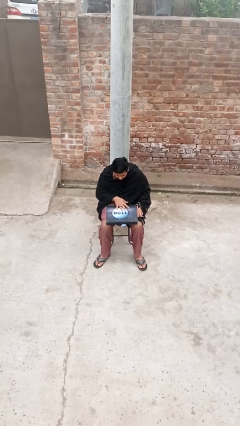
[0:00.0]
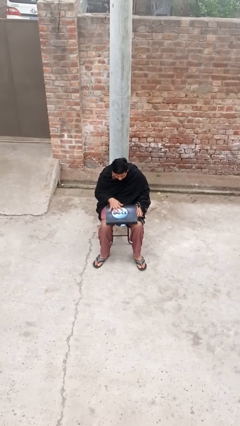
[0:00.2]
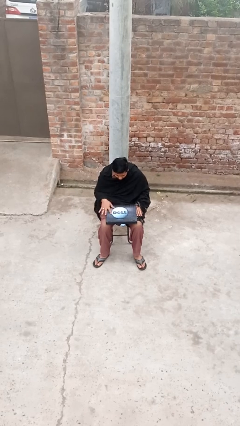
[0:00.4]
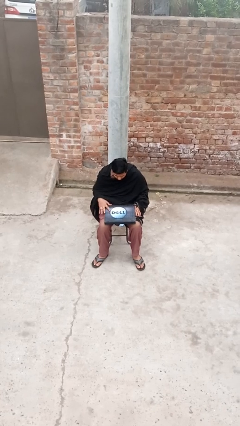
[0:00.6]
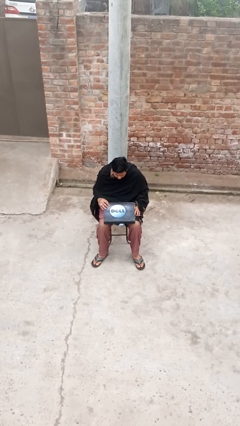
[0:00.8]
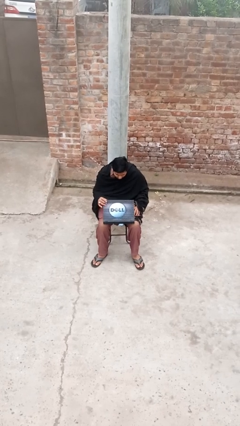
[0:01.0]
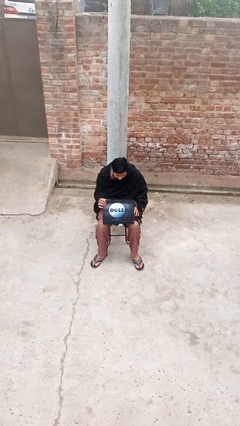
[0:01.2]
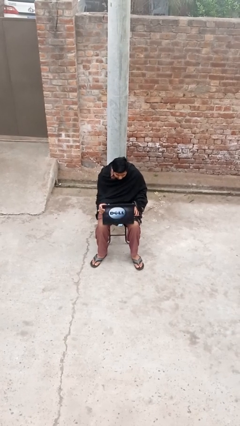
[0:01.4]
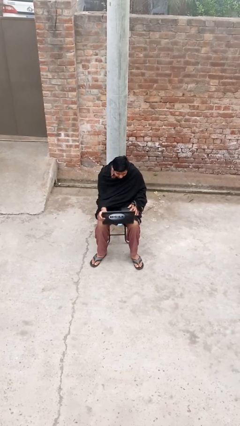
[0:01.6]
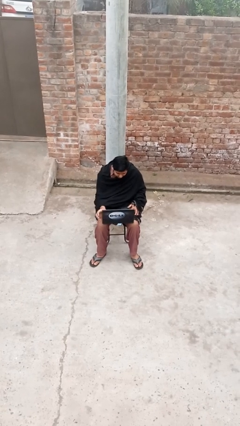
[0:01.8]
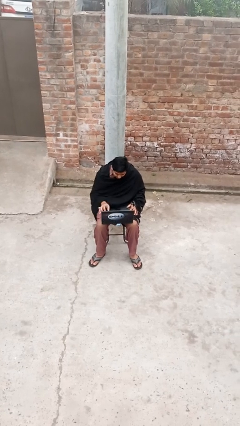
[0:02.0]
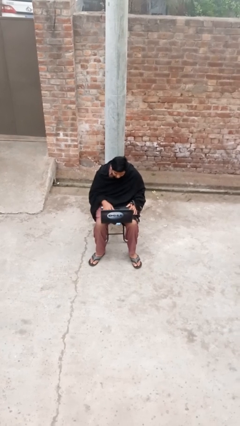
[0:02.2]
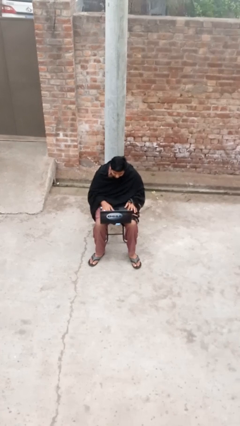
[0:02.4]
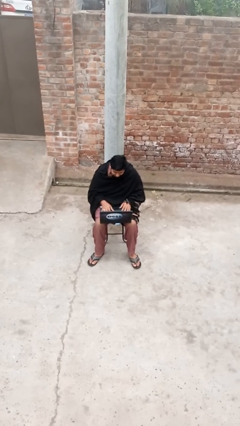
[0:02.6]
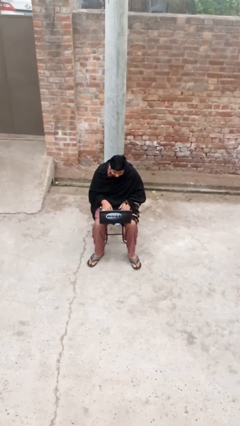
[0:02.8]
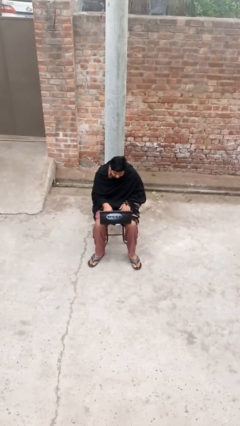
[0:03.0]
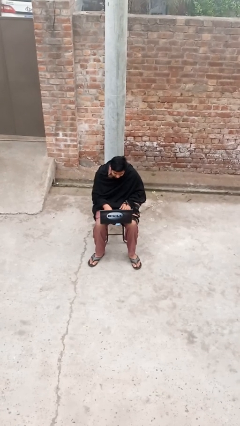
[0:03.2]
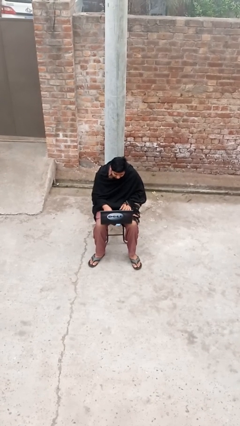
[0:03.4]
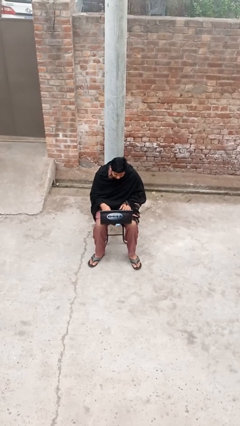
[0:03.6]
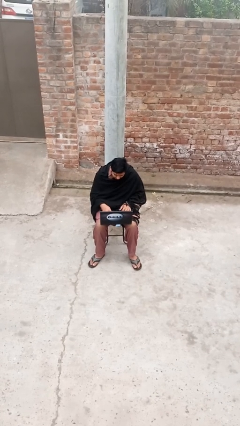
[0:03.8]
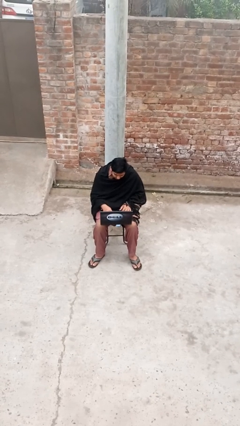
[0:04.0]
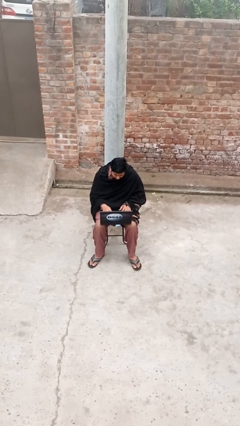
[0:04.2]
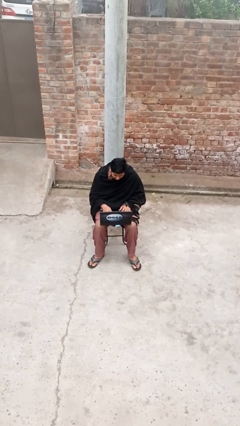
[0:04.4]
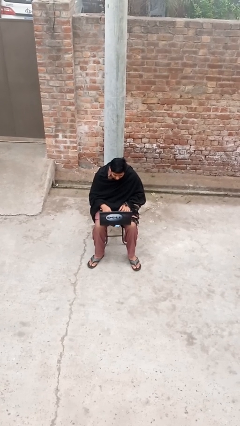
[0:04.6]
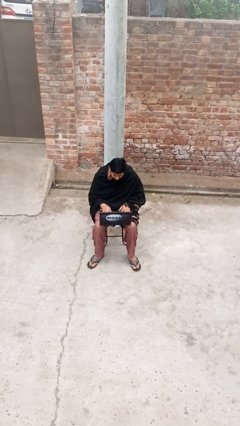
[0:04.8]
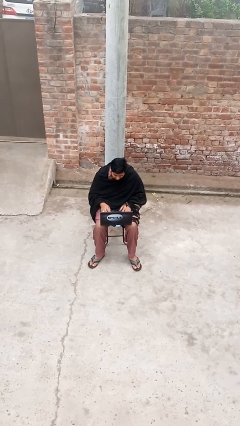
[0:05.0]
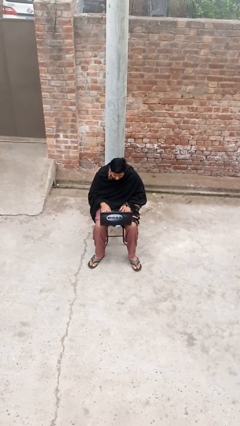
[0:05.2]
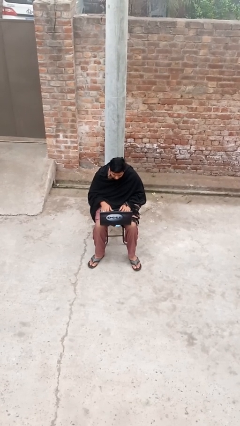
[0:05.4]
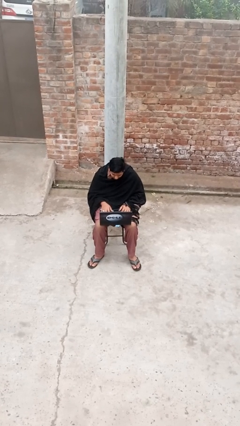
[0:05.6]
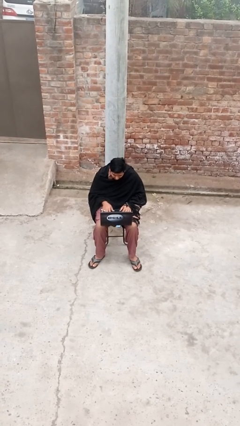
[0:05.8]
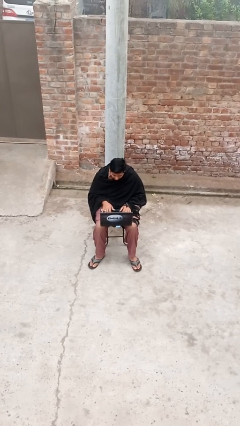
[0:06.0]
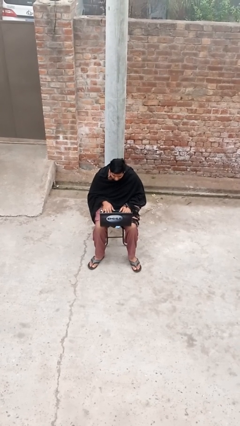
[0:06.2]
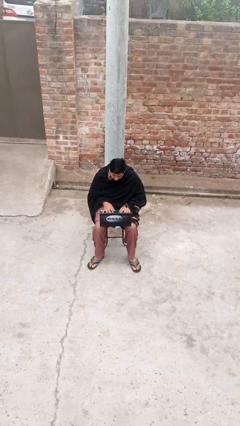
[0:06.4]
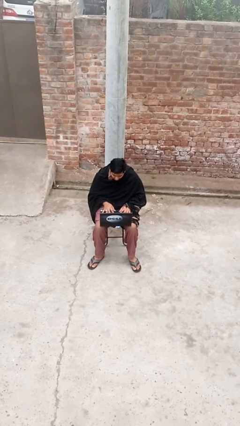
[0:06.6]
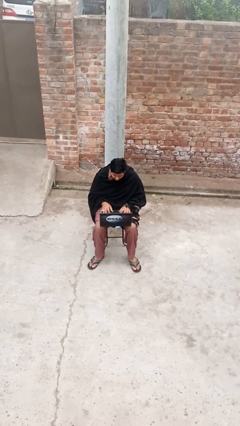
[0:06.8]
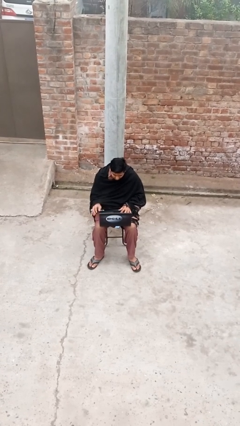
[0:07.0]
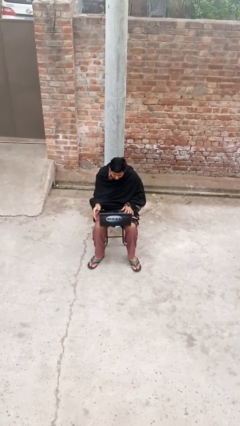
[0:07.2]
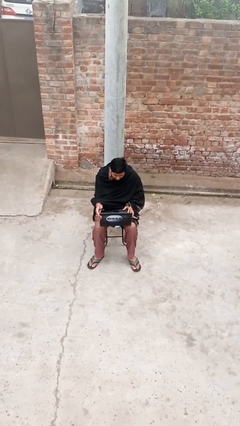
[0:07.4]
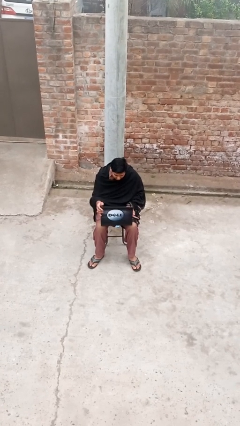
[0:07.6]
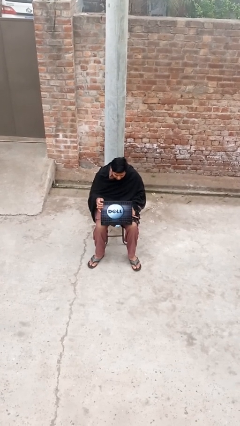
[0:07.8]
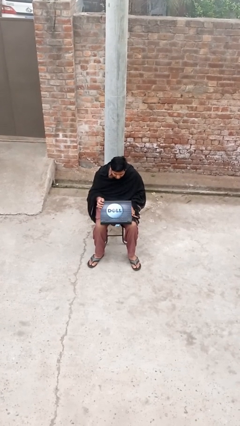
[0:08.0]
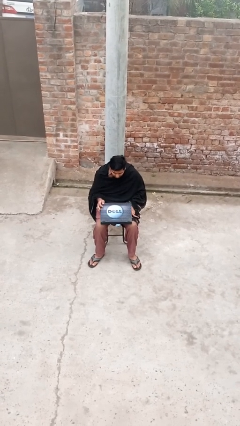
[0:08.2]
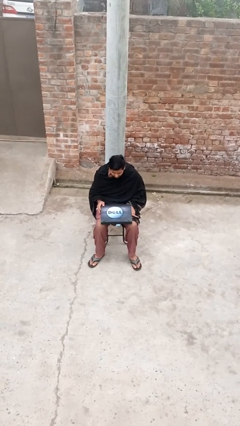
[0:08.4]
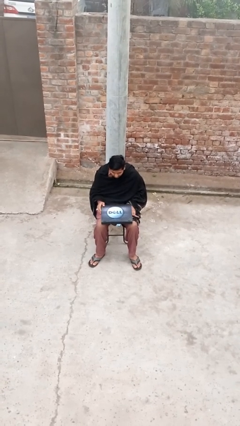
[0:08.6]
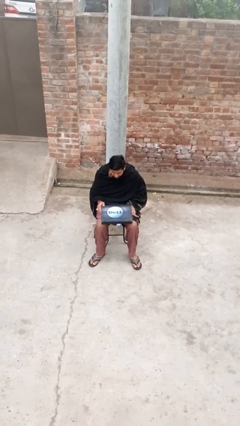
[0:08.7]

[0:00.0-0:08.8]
person interacts with laptop

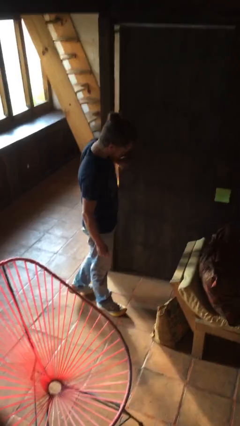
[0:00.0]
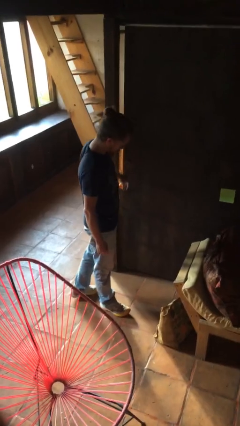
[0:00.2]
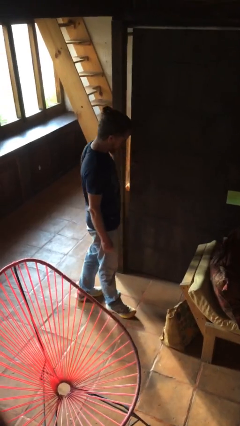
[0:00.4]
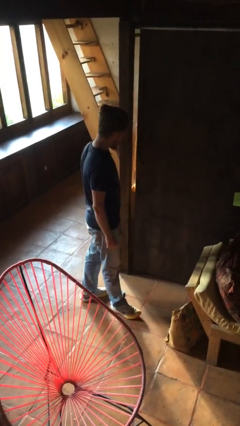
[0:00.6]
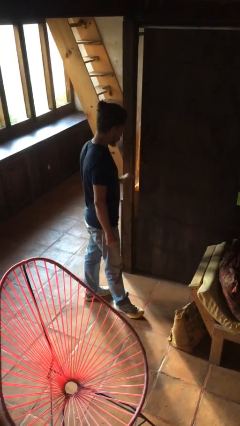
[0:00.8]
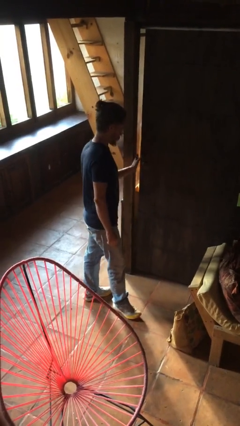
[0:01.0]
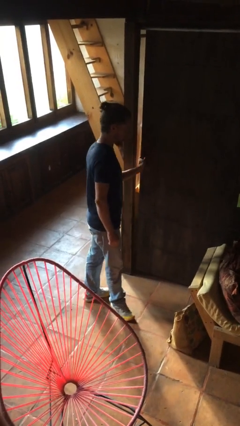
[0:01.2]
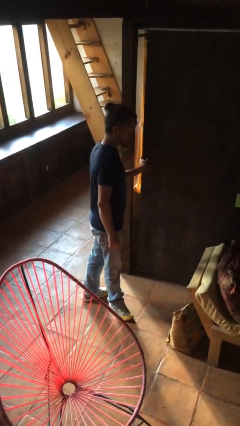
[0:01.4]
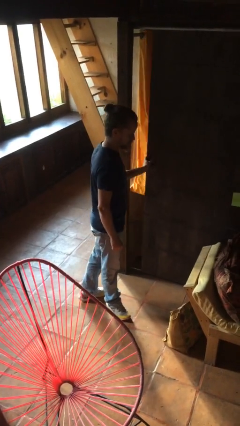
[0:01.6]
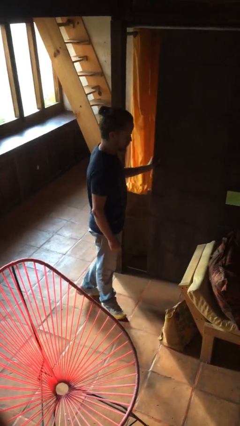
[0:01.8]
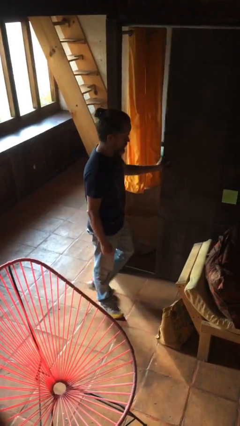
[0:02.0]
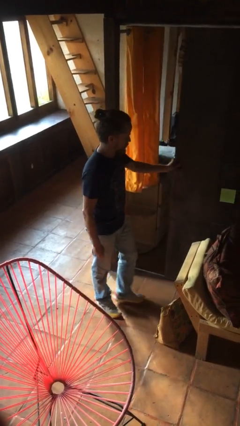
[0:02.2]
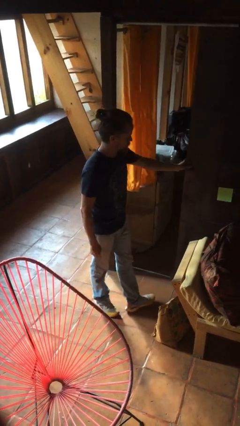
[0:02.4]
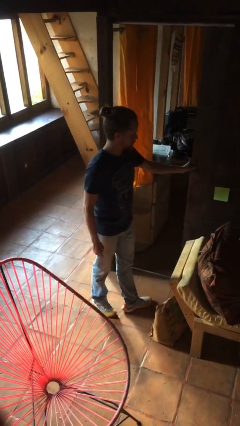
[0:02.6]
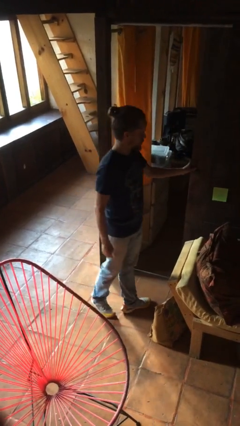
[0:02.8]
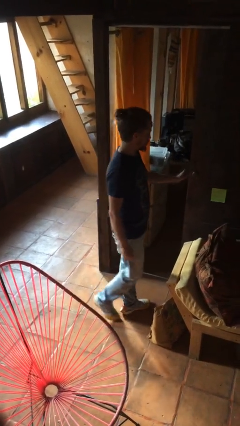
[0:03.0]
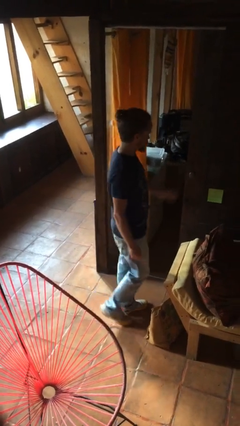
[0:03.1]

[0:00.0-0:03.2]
person opens sliding door

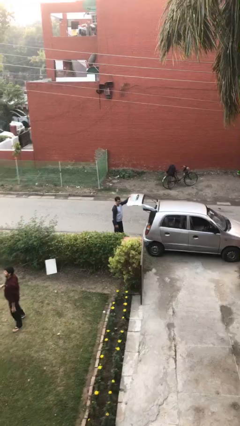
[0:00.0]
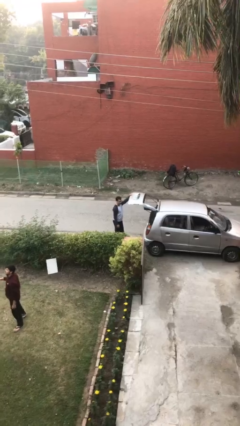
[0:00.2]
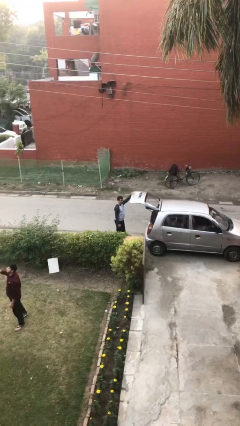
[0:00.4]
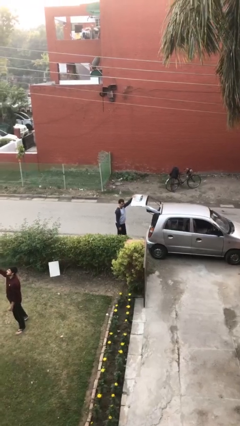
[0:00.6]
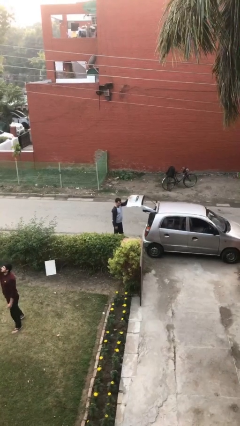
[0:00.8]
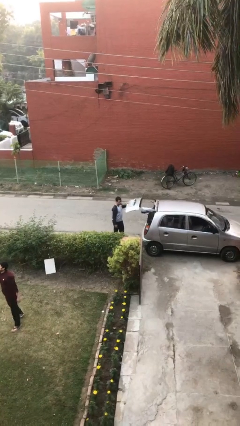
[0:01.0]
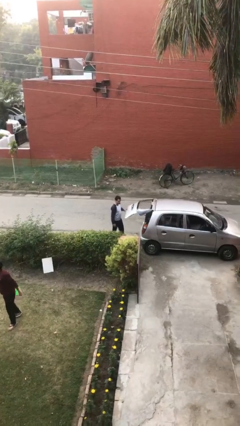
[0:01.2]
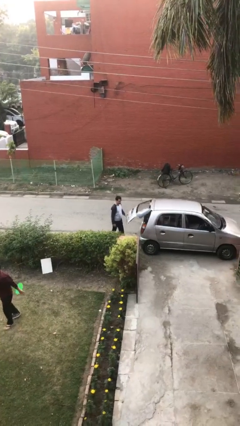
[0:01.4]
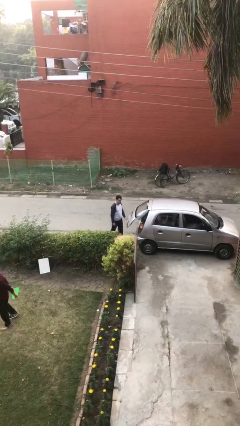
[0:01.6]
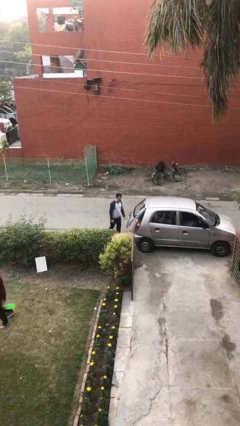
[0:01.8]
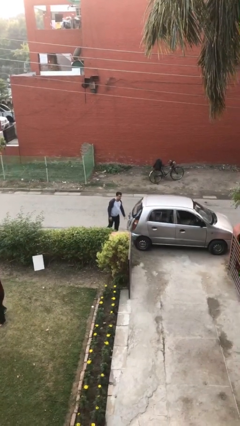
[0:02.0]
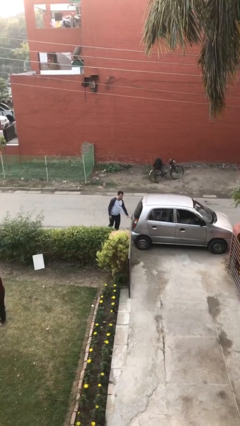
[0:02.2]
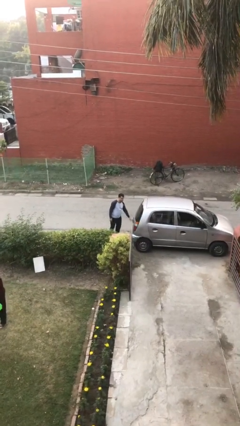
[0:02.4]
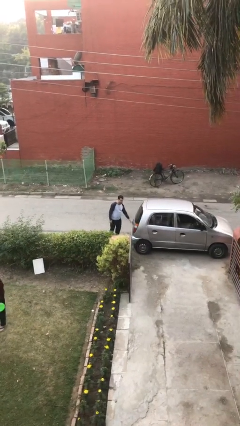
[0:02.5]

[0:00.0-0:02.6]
person closes car trunk

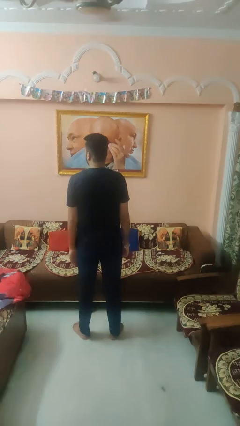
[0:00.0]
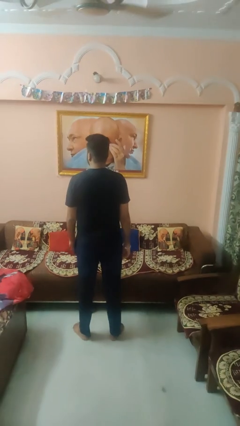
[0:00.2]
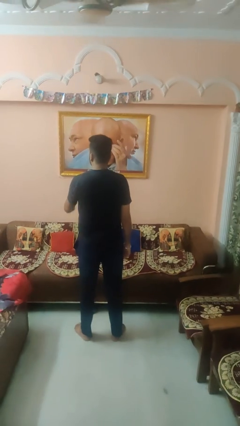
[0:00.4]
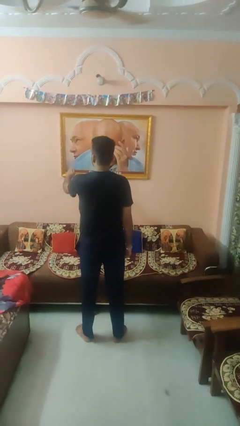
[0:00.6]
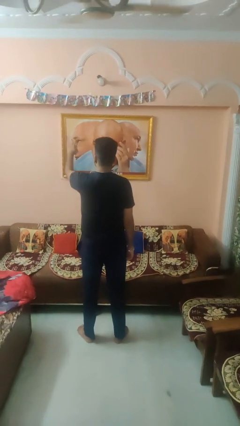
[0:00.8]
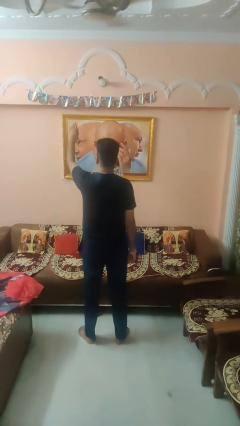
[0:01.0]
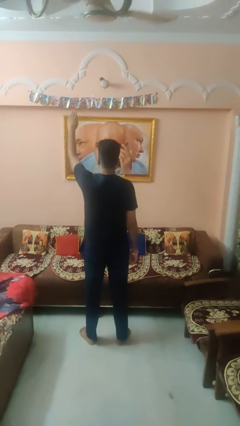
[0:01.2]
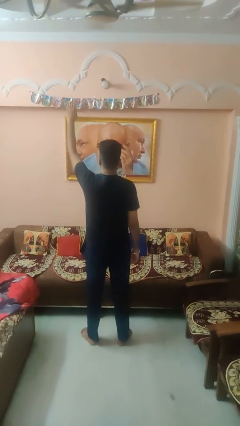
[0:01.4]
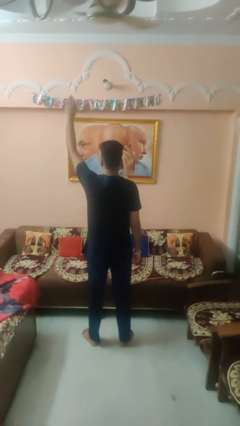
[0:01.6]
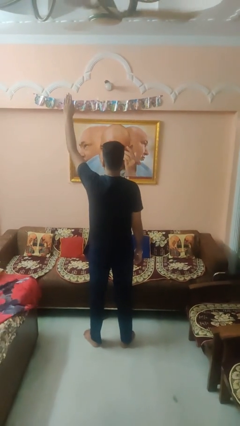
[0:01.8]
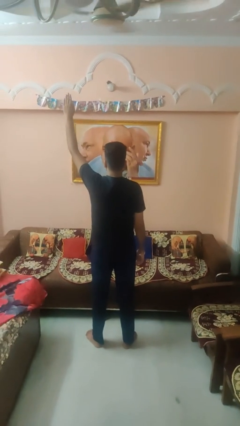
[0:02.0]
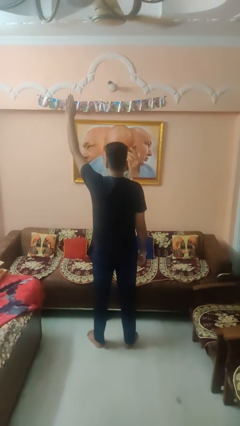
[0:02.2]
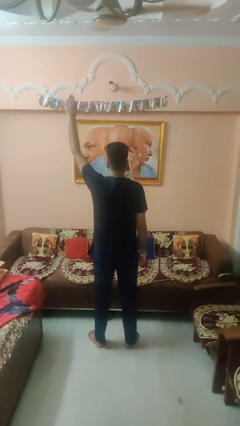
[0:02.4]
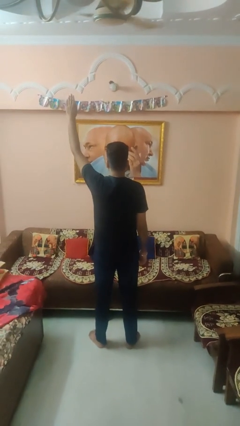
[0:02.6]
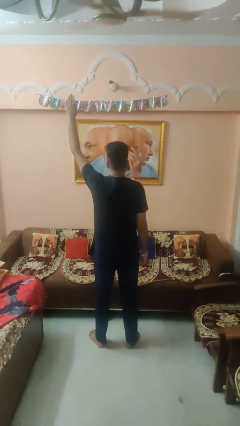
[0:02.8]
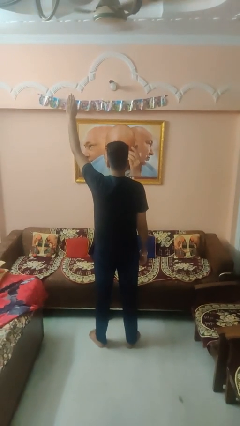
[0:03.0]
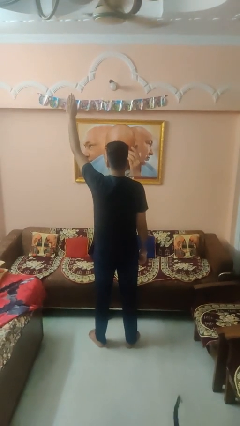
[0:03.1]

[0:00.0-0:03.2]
person gestures raise hand

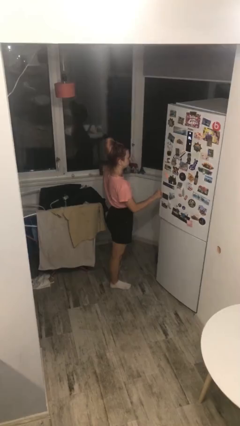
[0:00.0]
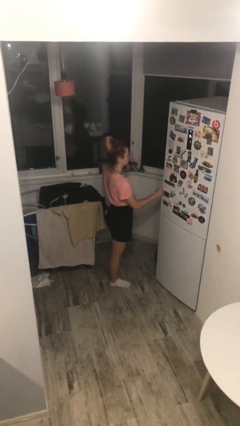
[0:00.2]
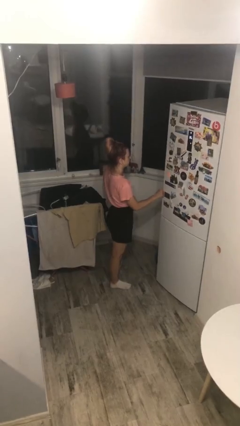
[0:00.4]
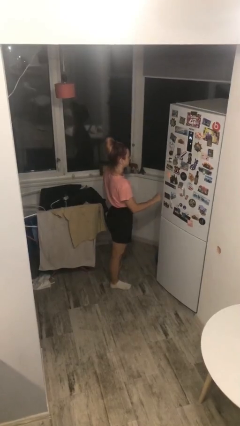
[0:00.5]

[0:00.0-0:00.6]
person closes refrigerator
